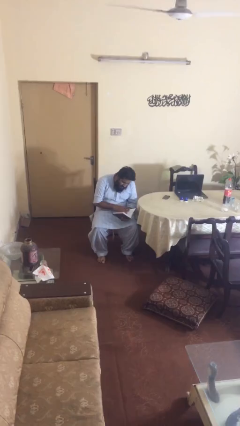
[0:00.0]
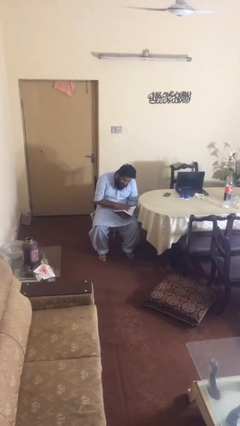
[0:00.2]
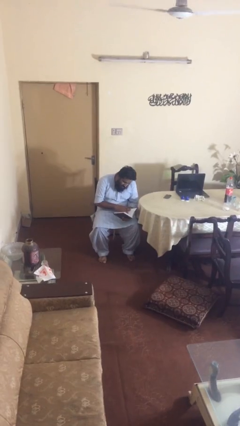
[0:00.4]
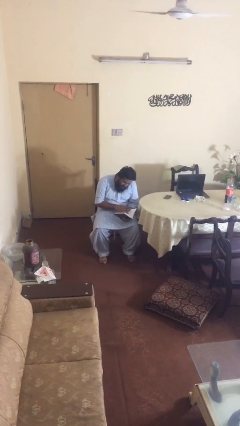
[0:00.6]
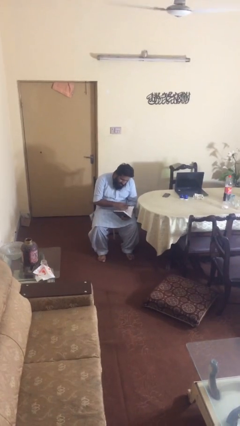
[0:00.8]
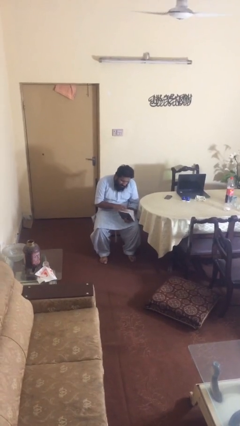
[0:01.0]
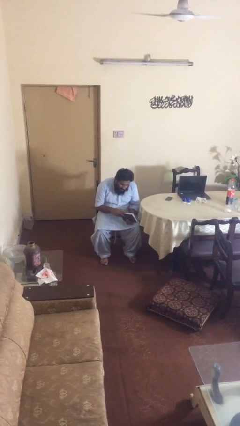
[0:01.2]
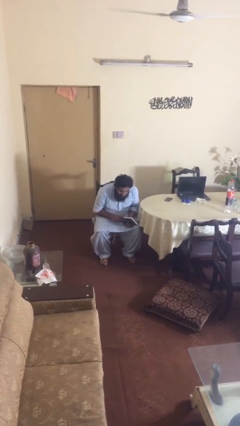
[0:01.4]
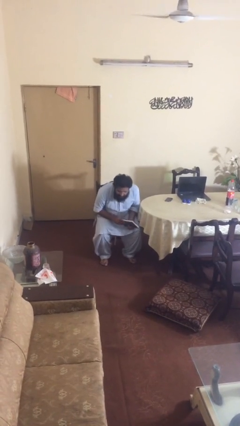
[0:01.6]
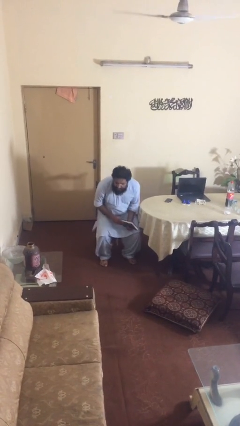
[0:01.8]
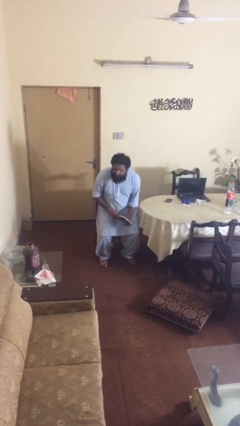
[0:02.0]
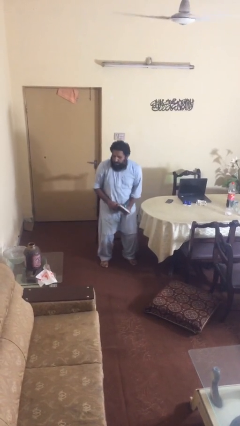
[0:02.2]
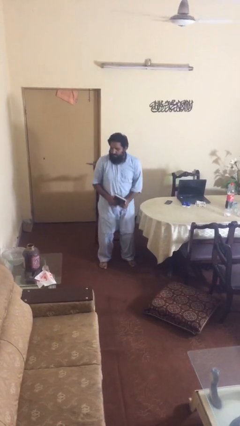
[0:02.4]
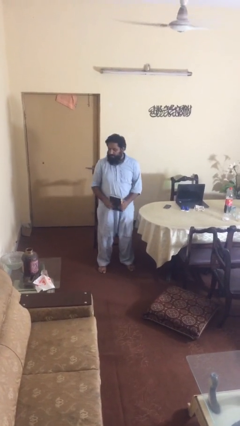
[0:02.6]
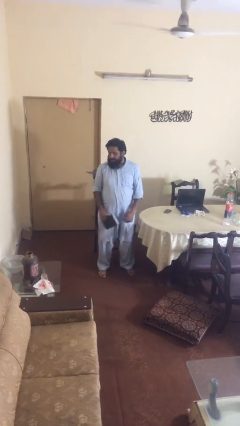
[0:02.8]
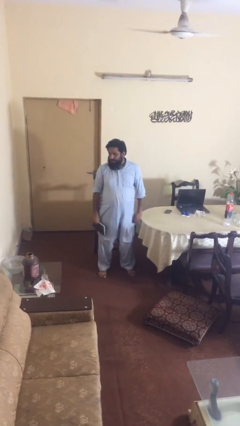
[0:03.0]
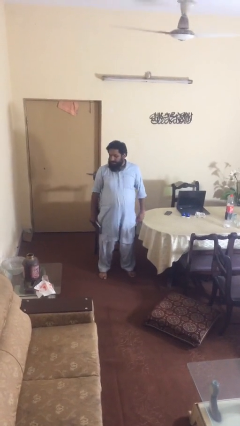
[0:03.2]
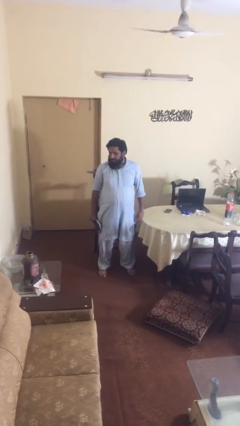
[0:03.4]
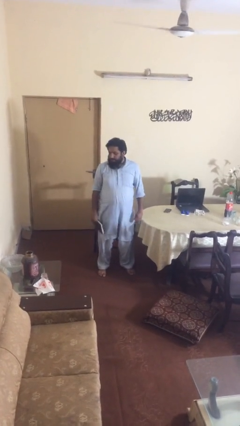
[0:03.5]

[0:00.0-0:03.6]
person stands up

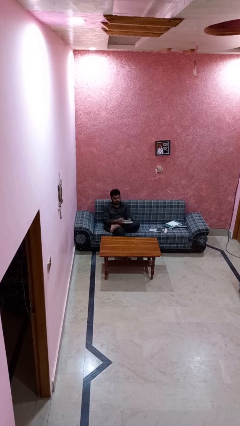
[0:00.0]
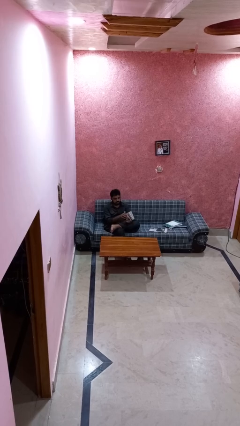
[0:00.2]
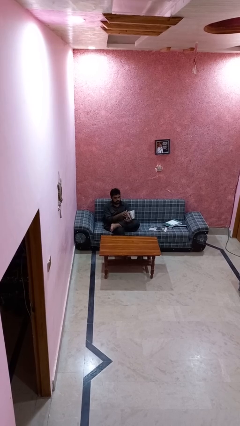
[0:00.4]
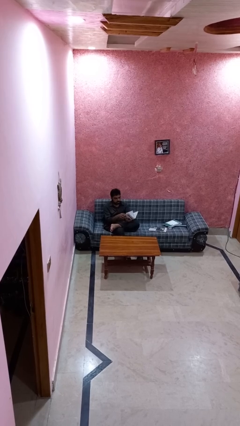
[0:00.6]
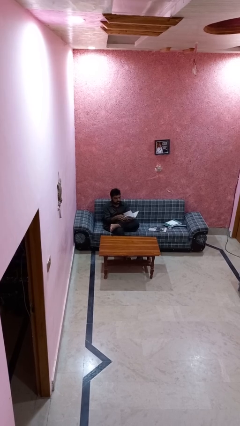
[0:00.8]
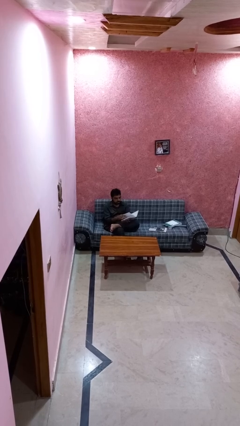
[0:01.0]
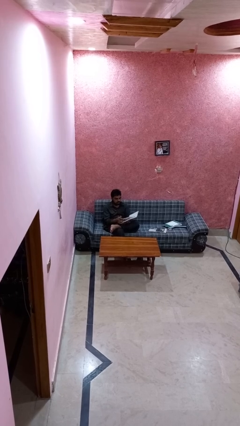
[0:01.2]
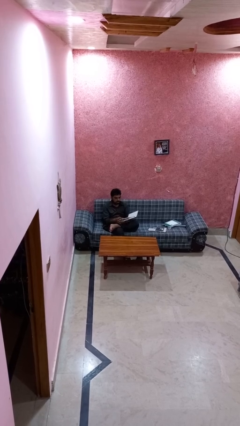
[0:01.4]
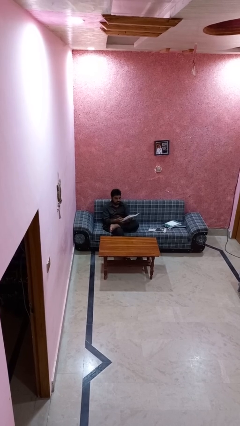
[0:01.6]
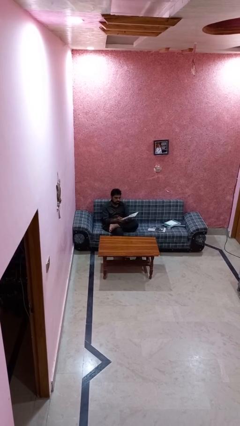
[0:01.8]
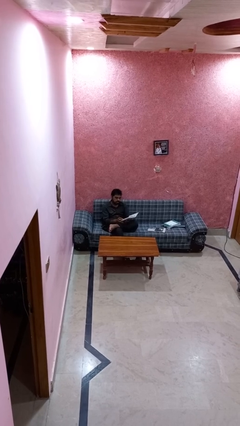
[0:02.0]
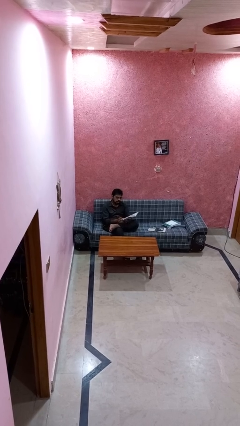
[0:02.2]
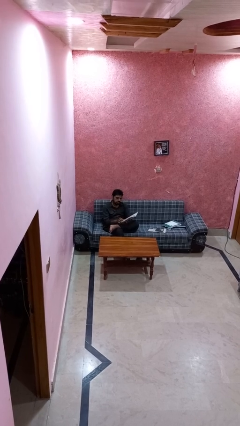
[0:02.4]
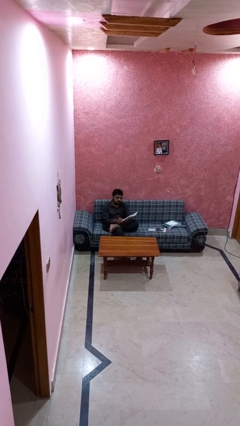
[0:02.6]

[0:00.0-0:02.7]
person reads book

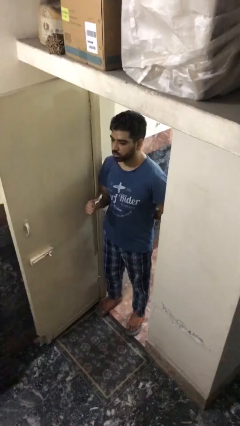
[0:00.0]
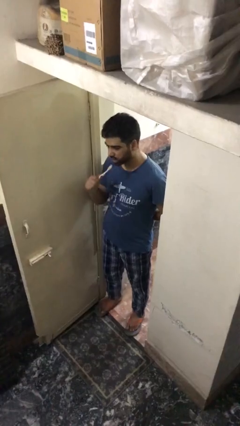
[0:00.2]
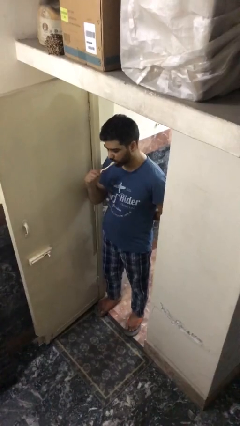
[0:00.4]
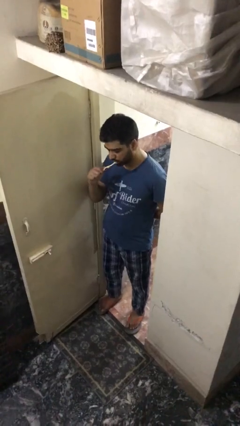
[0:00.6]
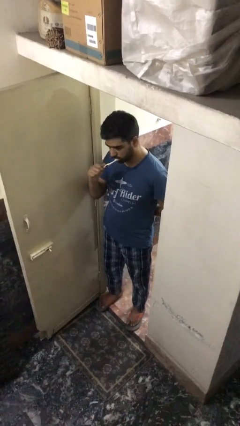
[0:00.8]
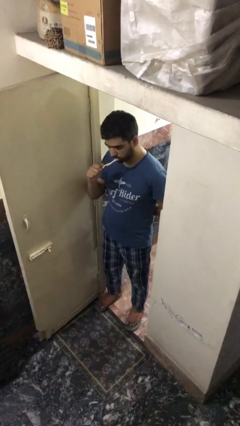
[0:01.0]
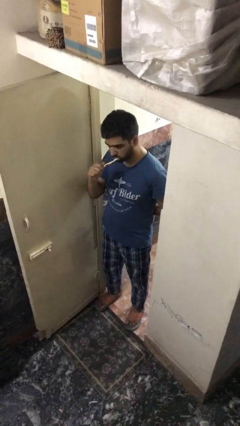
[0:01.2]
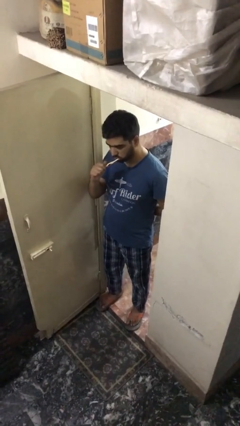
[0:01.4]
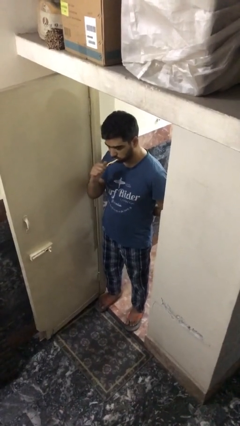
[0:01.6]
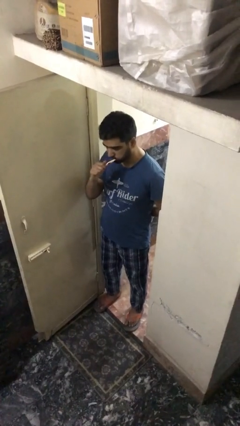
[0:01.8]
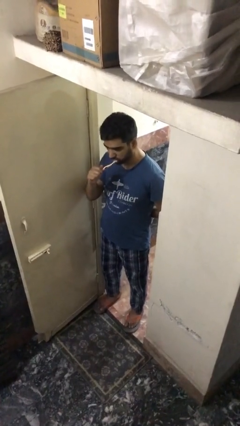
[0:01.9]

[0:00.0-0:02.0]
person brushes teeth

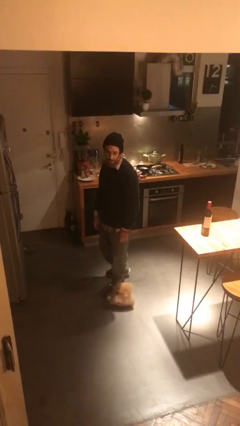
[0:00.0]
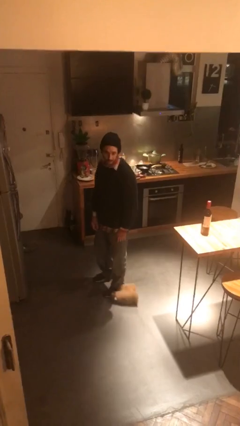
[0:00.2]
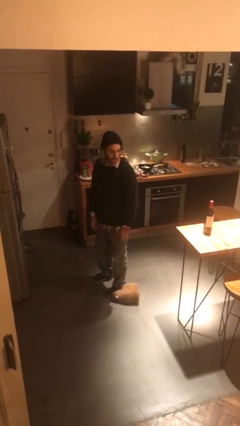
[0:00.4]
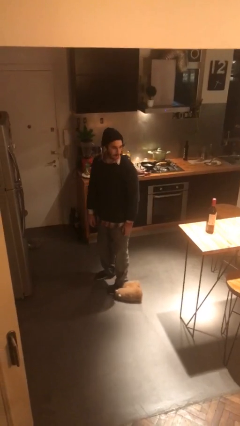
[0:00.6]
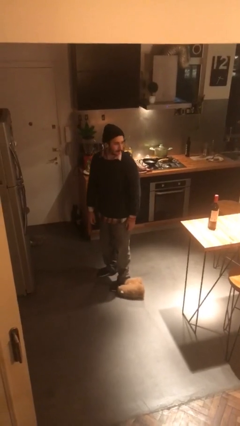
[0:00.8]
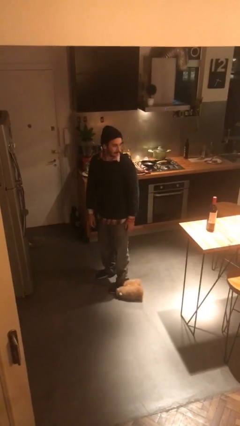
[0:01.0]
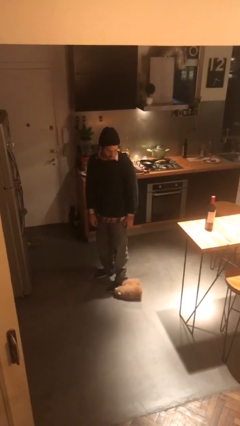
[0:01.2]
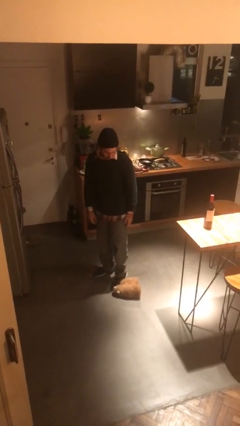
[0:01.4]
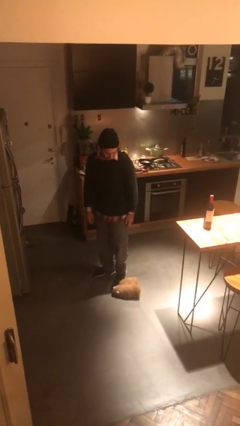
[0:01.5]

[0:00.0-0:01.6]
person drops object

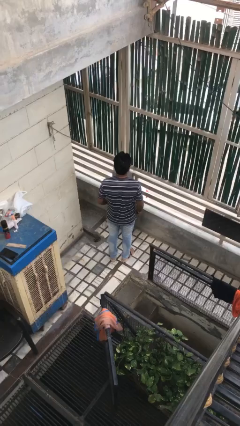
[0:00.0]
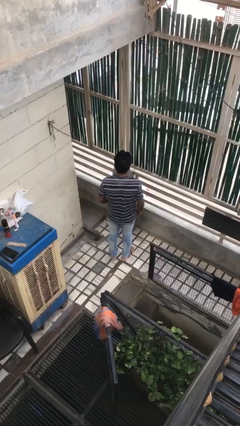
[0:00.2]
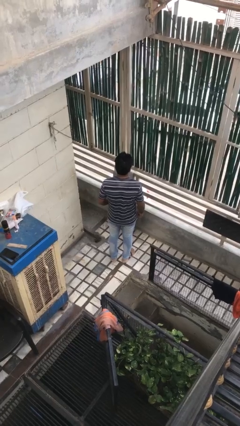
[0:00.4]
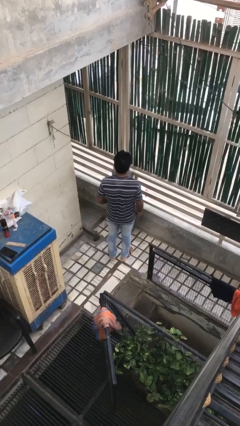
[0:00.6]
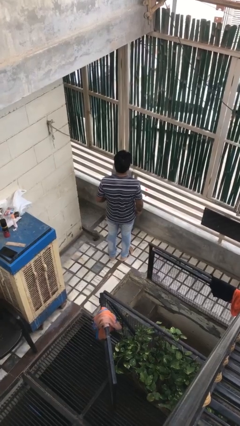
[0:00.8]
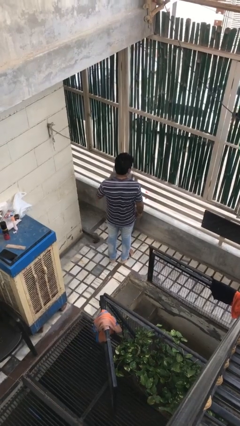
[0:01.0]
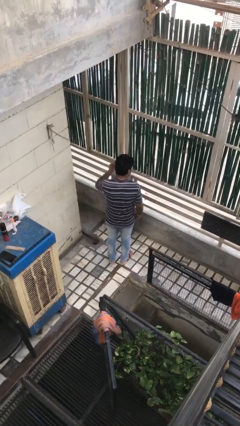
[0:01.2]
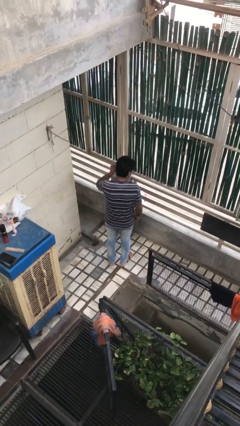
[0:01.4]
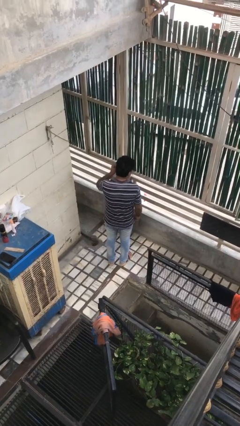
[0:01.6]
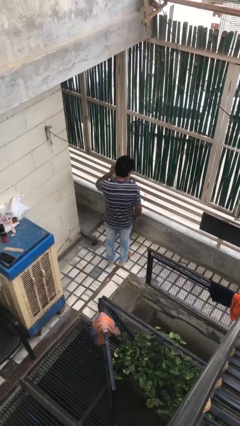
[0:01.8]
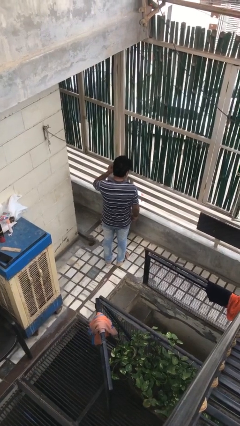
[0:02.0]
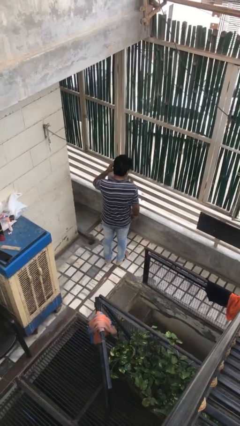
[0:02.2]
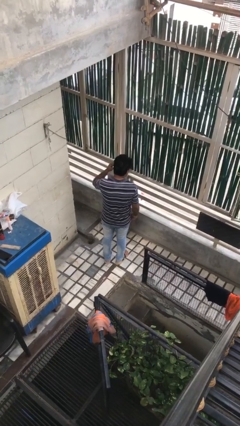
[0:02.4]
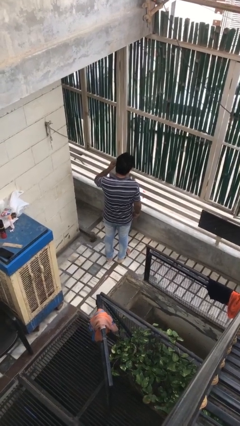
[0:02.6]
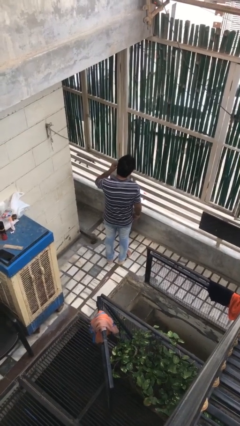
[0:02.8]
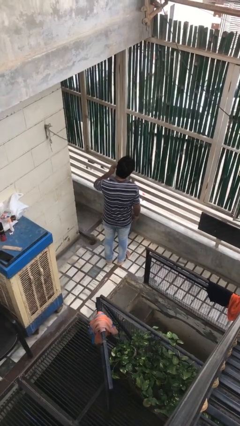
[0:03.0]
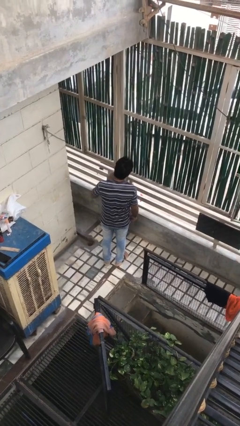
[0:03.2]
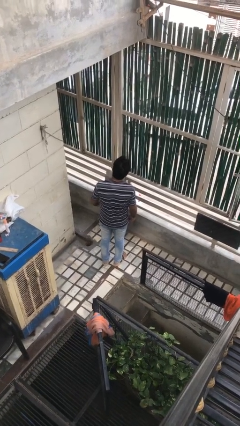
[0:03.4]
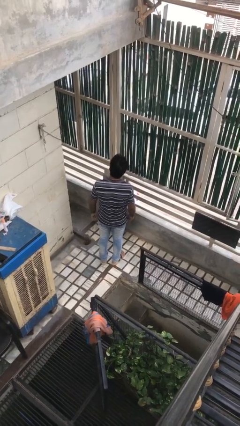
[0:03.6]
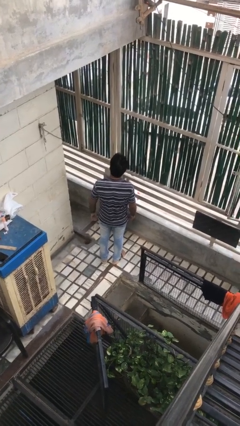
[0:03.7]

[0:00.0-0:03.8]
person puts on earrings

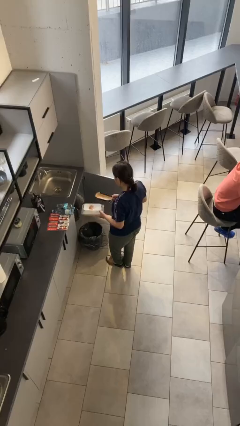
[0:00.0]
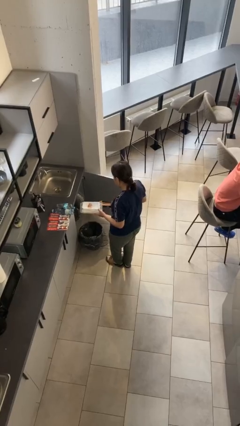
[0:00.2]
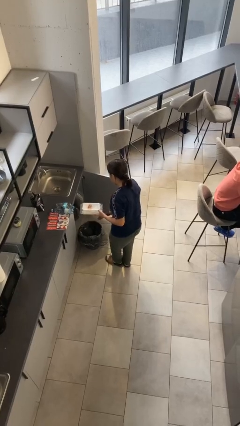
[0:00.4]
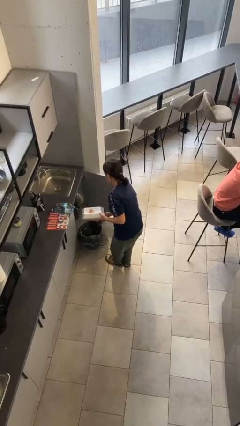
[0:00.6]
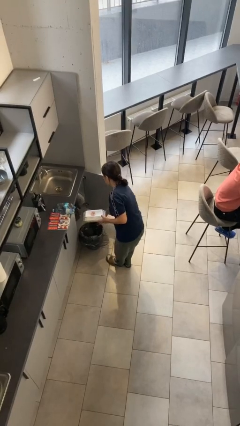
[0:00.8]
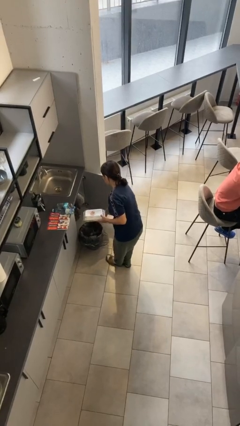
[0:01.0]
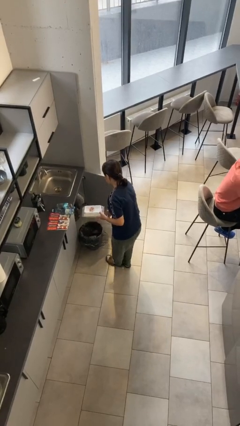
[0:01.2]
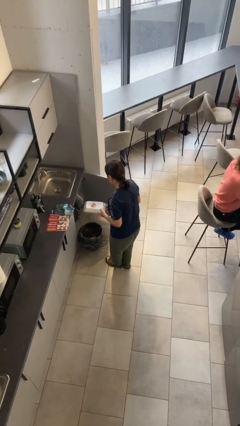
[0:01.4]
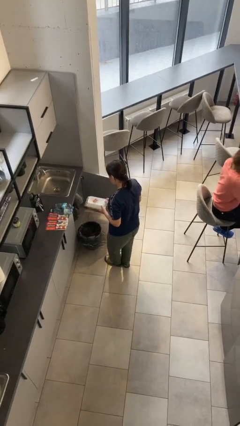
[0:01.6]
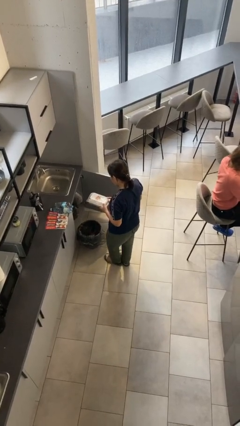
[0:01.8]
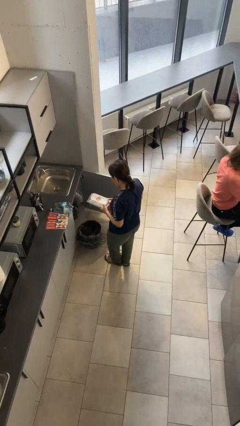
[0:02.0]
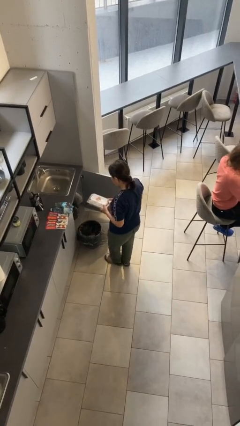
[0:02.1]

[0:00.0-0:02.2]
person discards trash

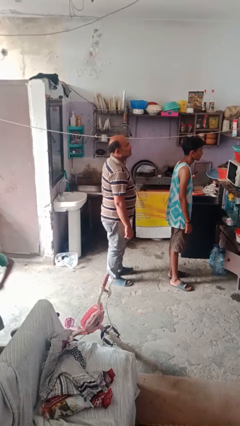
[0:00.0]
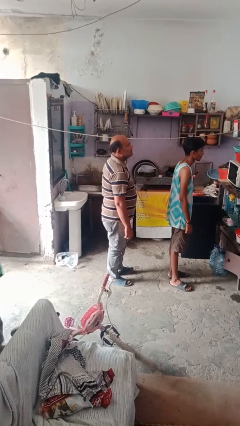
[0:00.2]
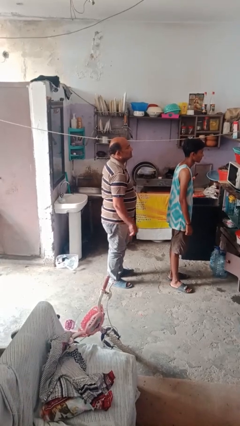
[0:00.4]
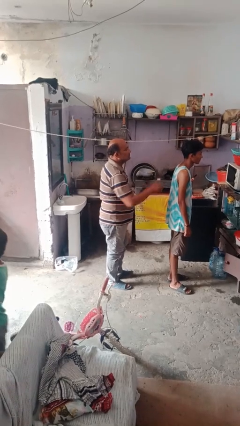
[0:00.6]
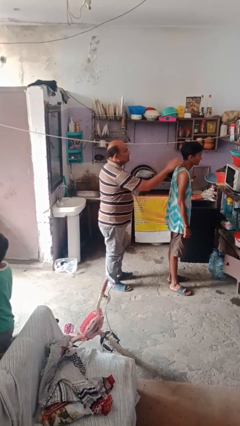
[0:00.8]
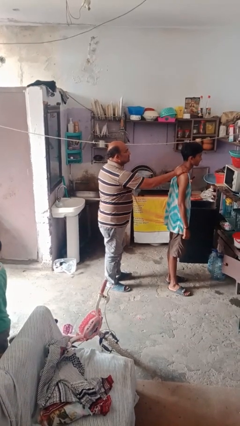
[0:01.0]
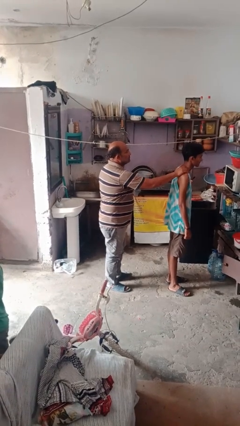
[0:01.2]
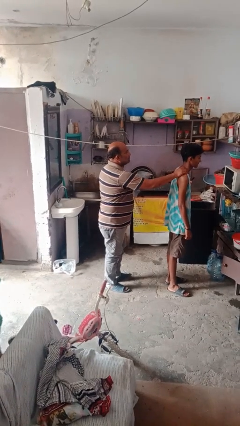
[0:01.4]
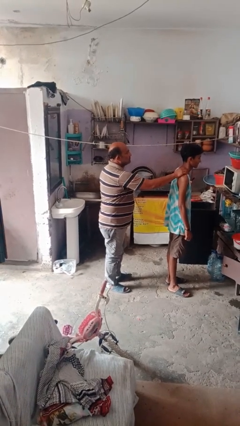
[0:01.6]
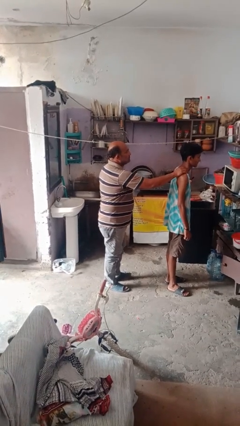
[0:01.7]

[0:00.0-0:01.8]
person grabs person by shoulder
